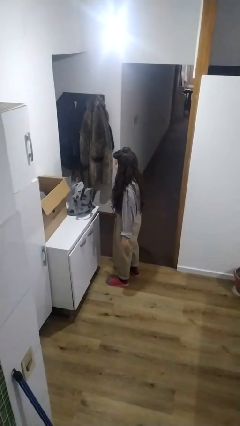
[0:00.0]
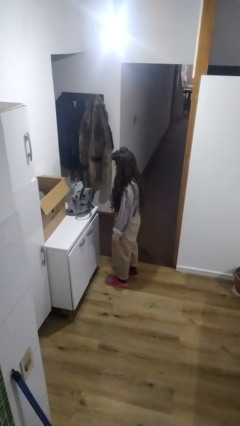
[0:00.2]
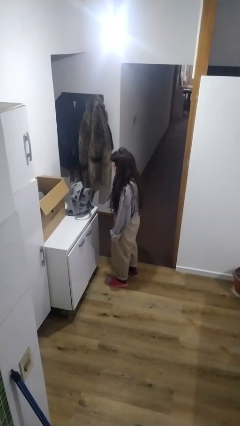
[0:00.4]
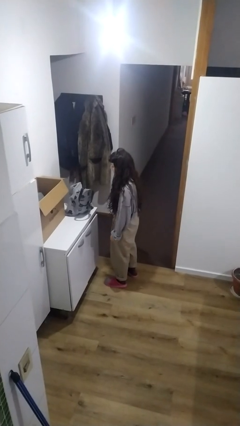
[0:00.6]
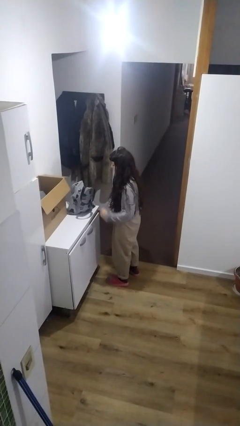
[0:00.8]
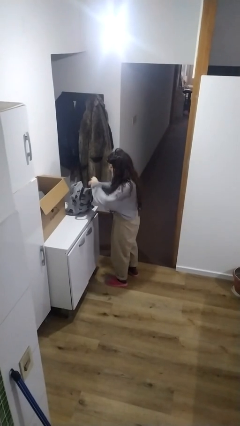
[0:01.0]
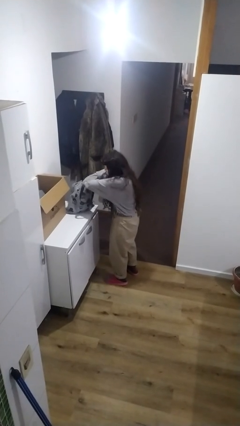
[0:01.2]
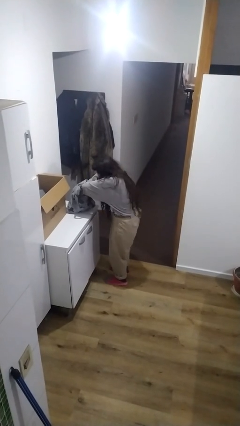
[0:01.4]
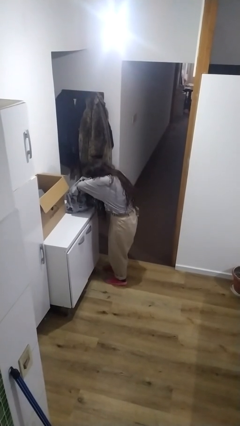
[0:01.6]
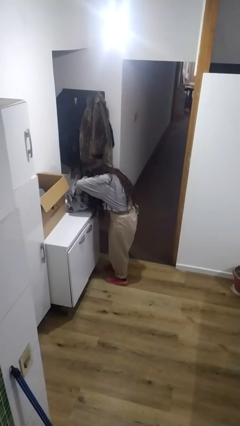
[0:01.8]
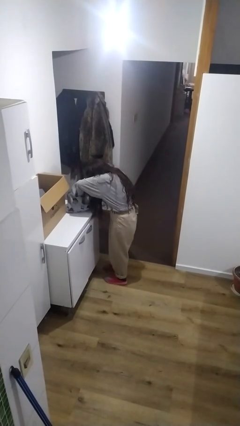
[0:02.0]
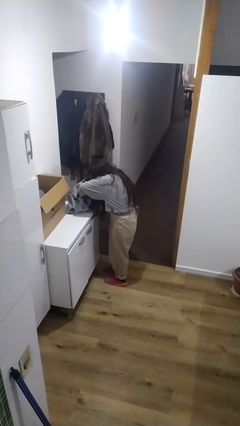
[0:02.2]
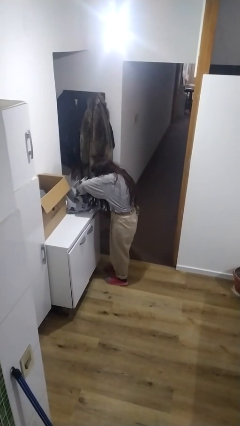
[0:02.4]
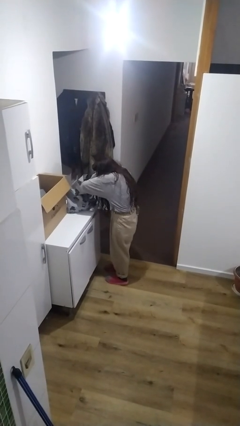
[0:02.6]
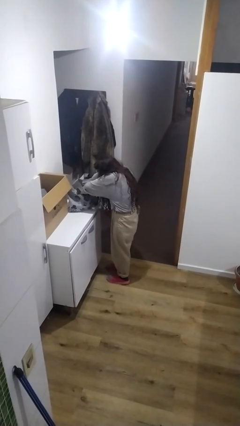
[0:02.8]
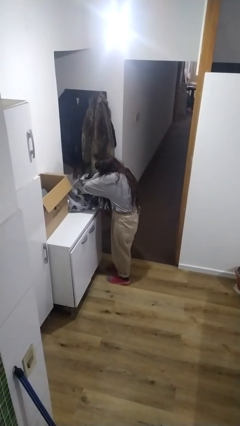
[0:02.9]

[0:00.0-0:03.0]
person searches in bag

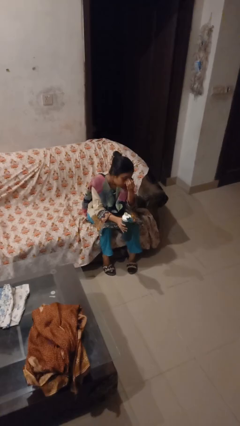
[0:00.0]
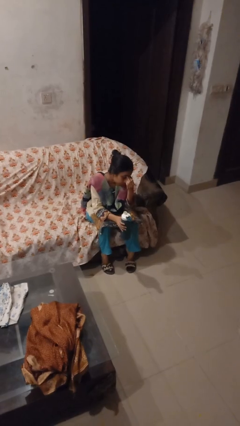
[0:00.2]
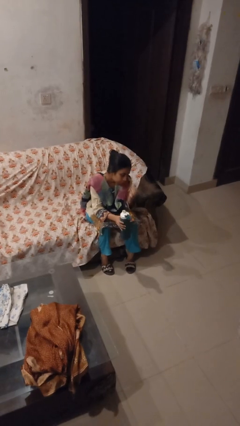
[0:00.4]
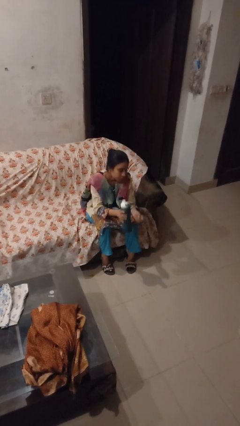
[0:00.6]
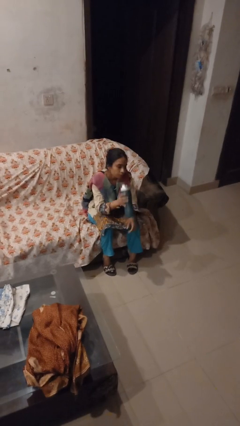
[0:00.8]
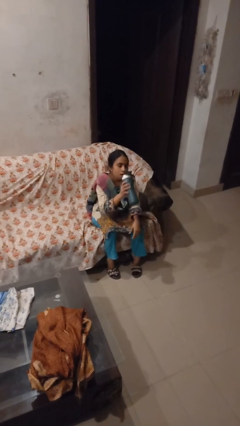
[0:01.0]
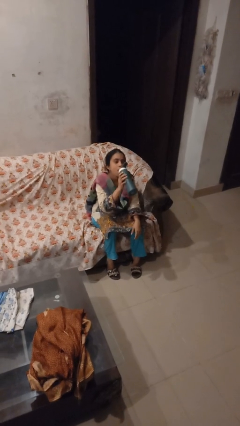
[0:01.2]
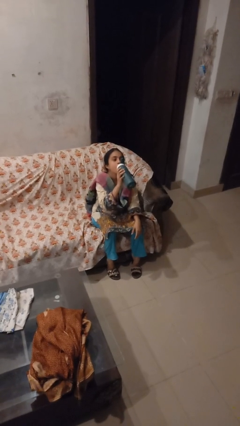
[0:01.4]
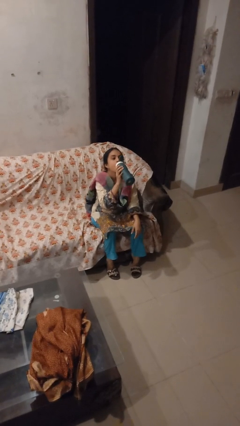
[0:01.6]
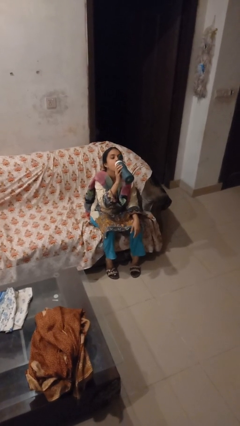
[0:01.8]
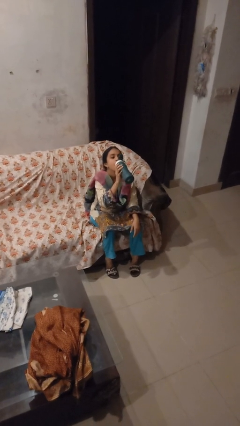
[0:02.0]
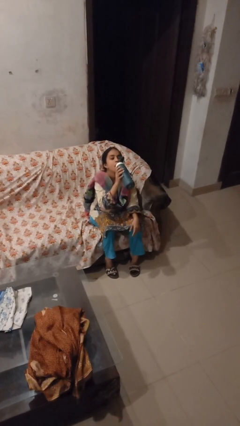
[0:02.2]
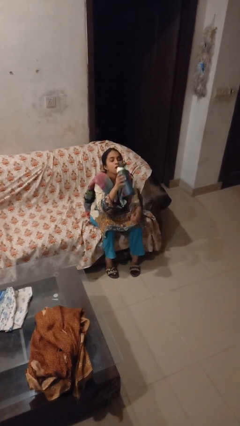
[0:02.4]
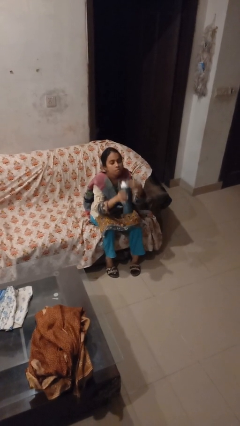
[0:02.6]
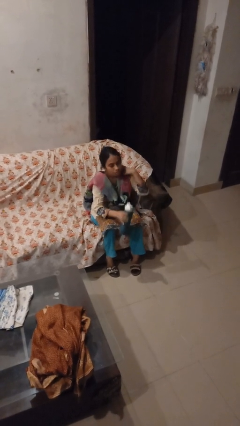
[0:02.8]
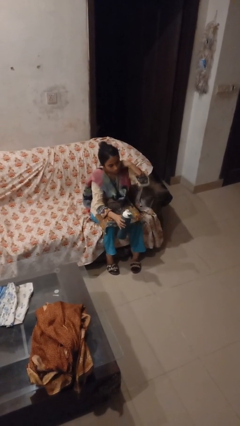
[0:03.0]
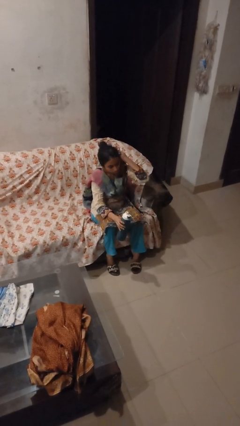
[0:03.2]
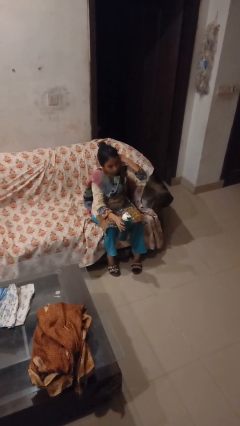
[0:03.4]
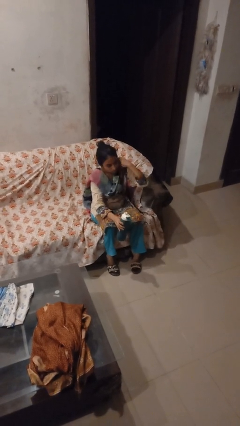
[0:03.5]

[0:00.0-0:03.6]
person drinks from bottle

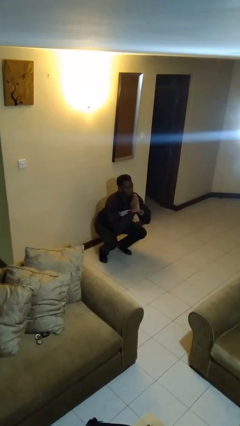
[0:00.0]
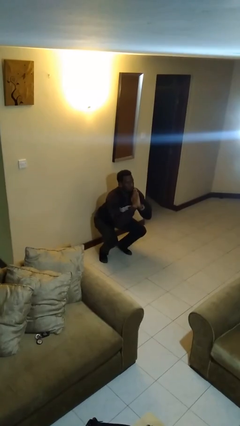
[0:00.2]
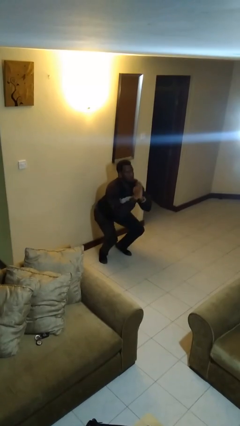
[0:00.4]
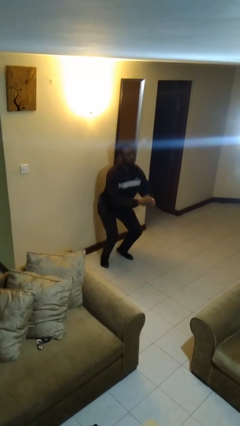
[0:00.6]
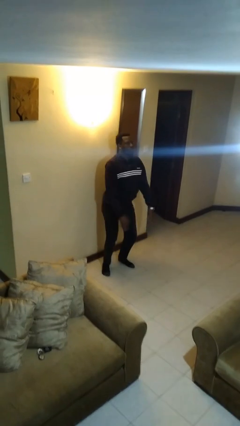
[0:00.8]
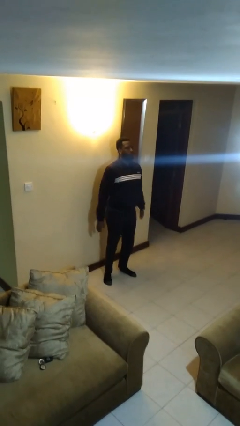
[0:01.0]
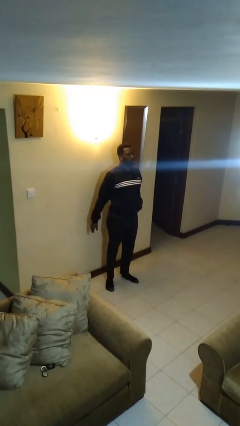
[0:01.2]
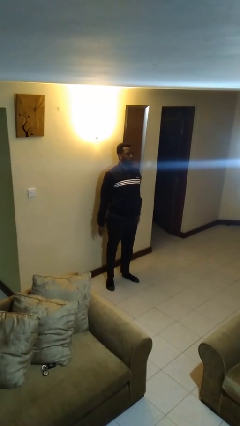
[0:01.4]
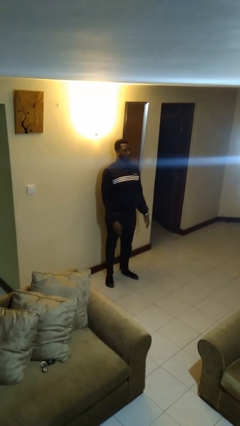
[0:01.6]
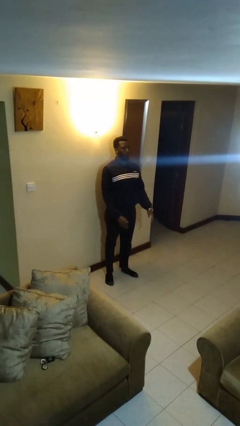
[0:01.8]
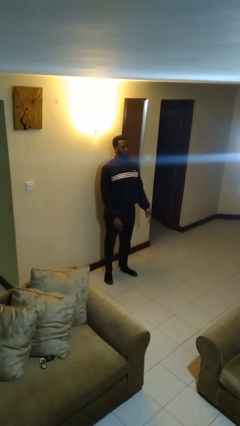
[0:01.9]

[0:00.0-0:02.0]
person stands up

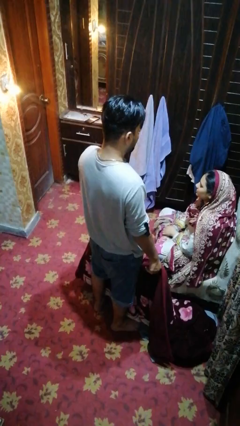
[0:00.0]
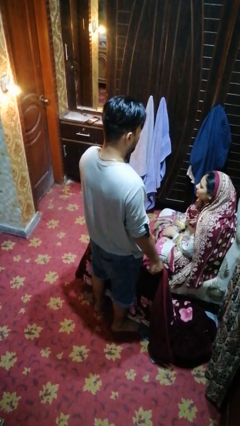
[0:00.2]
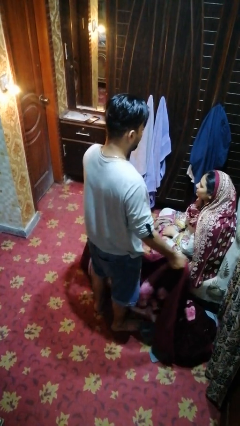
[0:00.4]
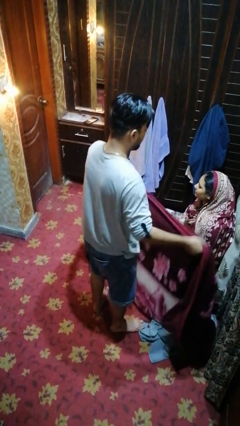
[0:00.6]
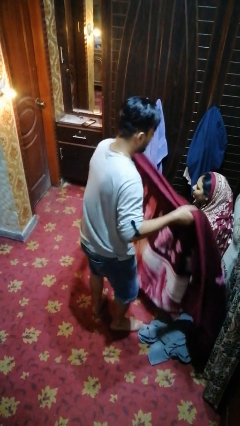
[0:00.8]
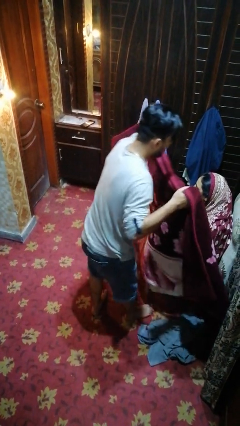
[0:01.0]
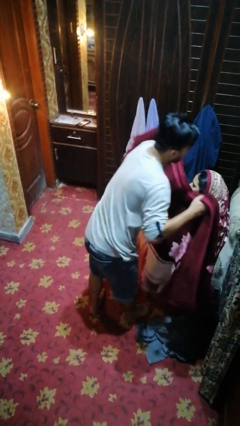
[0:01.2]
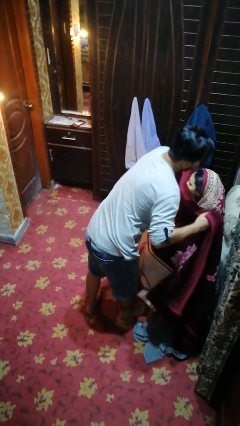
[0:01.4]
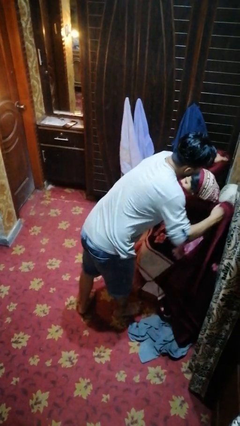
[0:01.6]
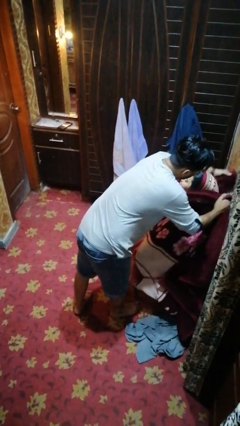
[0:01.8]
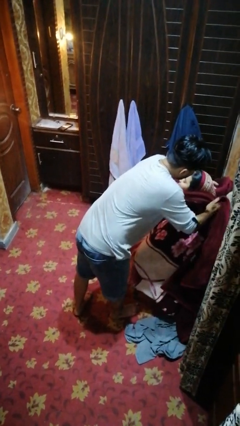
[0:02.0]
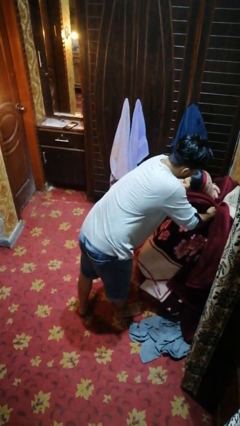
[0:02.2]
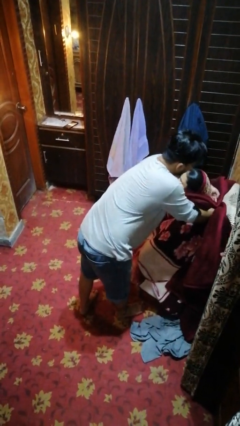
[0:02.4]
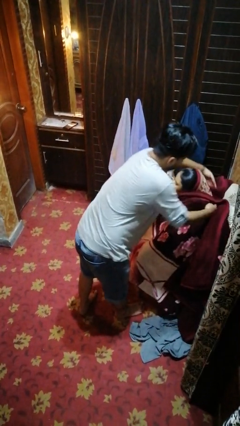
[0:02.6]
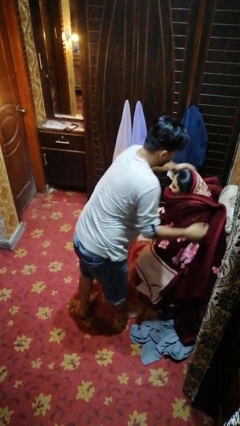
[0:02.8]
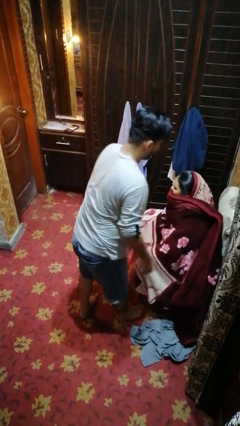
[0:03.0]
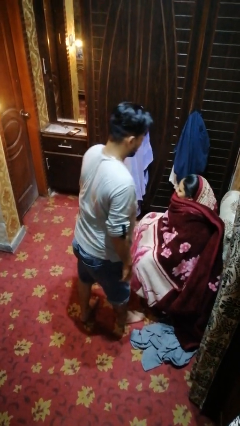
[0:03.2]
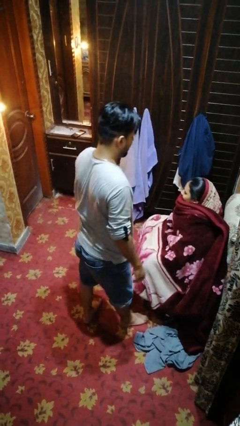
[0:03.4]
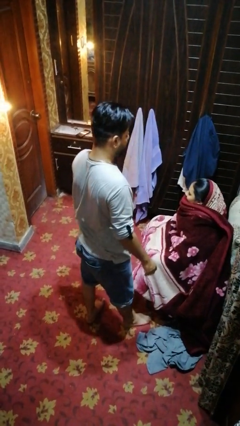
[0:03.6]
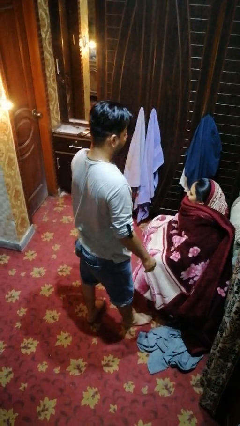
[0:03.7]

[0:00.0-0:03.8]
person covers friend with blanket

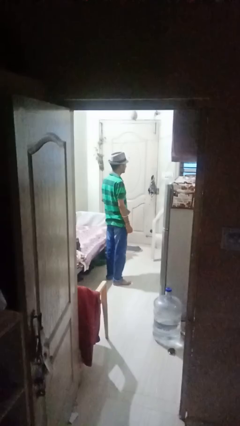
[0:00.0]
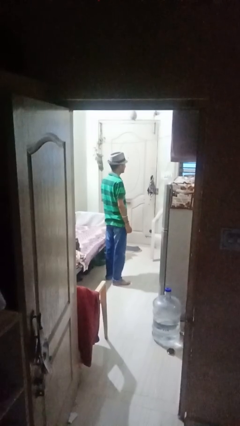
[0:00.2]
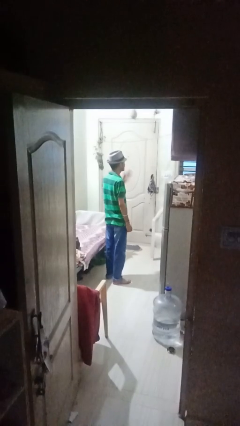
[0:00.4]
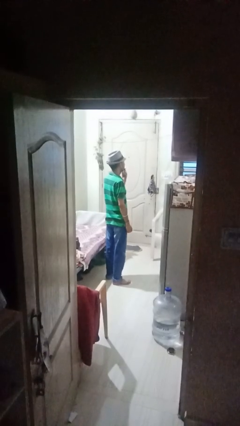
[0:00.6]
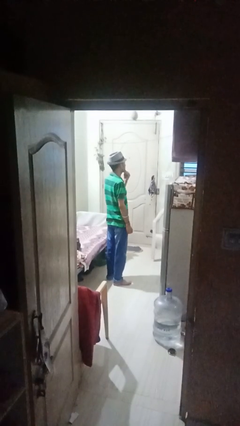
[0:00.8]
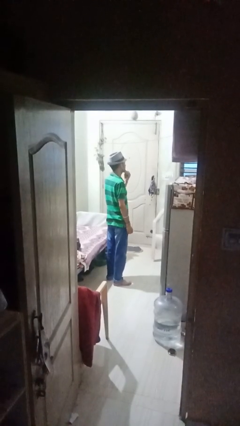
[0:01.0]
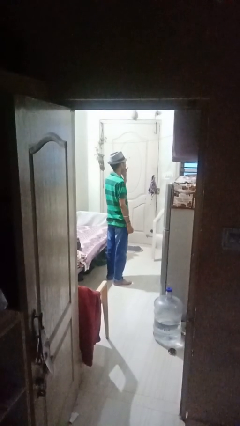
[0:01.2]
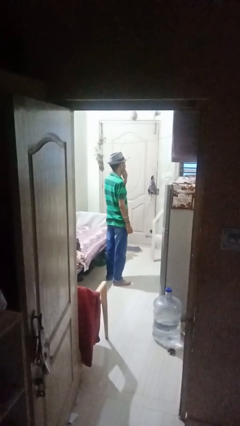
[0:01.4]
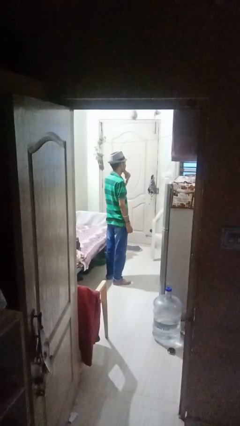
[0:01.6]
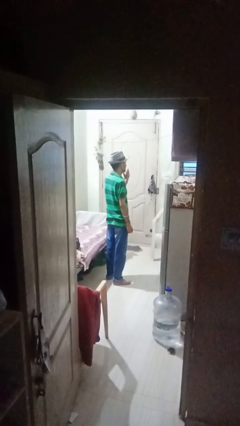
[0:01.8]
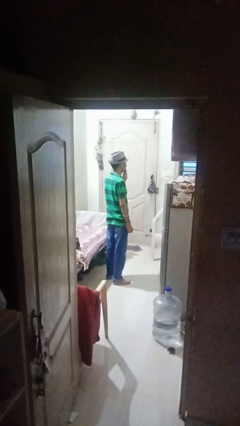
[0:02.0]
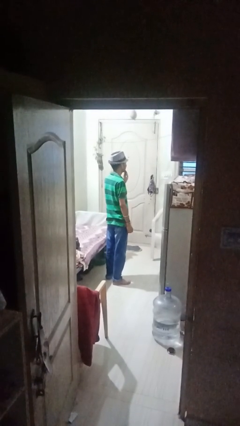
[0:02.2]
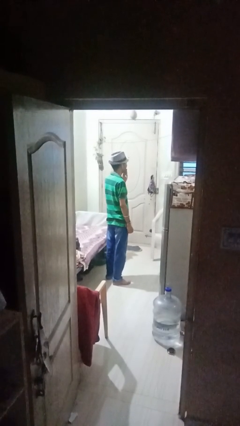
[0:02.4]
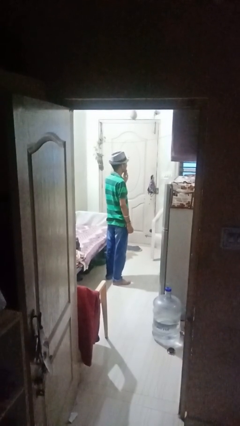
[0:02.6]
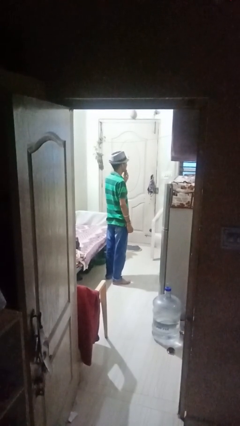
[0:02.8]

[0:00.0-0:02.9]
person strokes chin

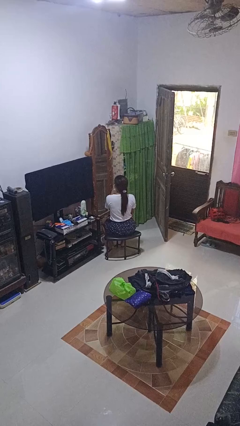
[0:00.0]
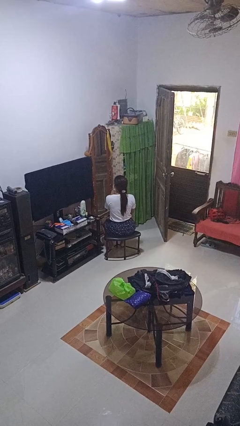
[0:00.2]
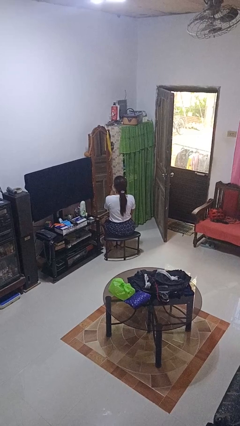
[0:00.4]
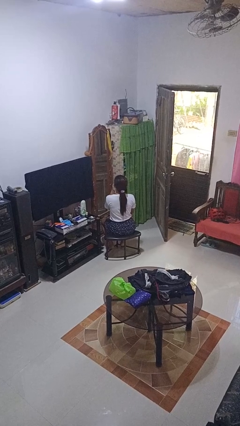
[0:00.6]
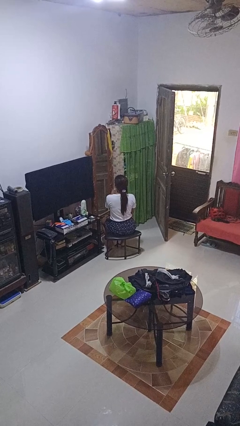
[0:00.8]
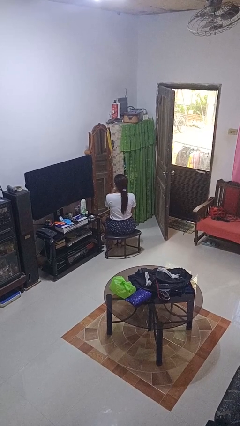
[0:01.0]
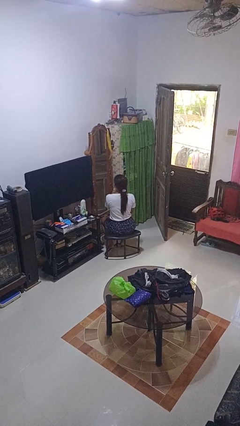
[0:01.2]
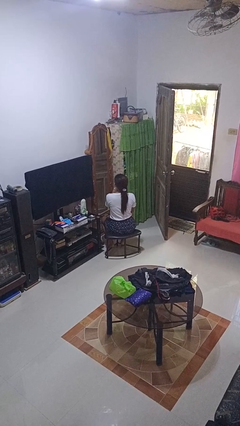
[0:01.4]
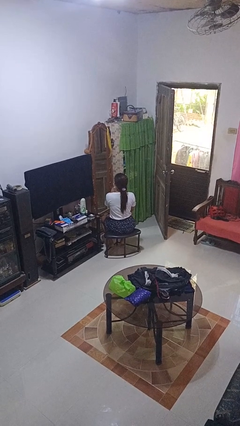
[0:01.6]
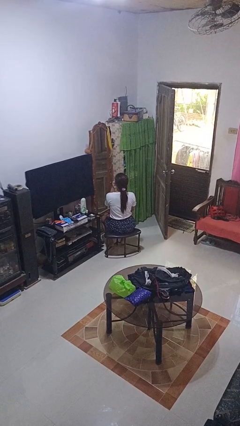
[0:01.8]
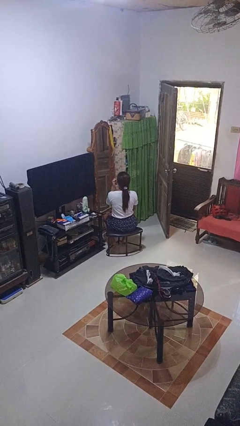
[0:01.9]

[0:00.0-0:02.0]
person applies lip makeup
